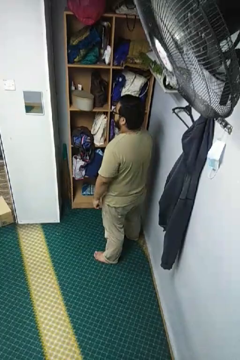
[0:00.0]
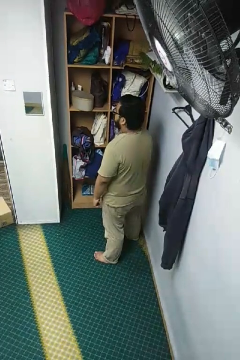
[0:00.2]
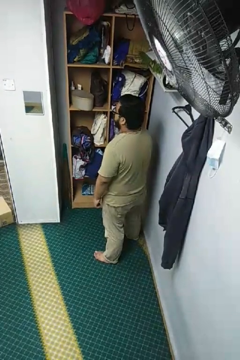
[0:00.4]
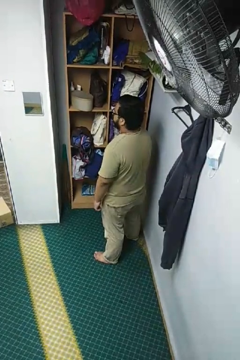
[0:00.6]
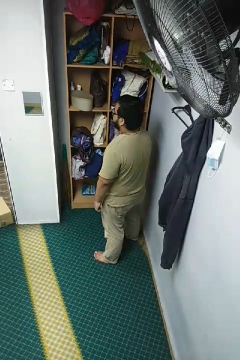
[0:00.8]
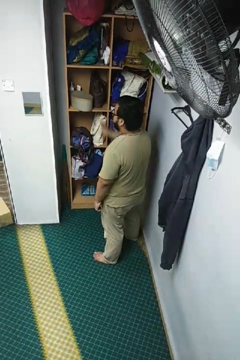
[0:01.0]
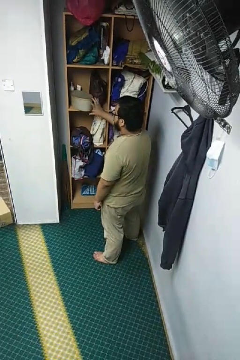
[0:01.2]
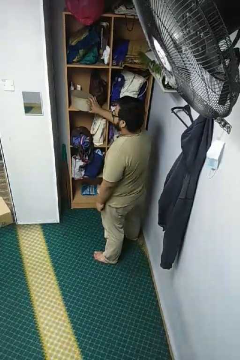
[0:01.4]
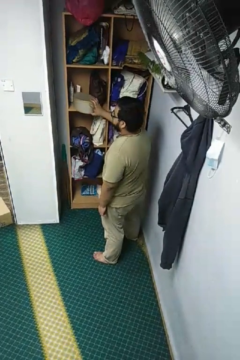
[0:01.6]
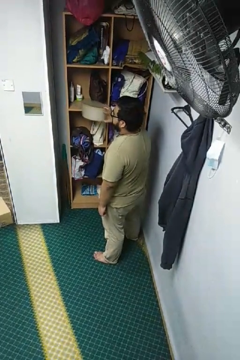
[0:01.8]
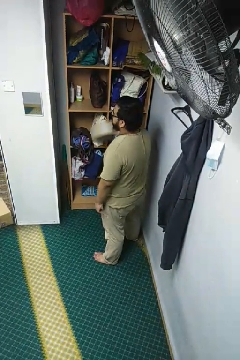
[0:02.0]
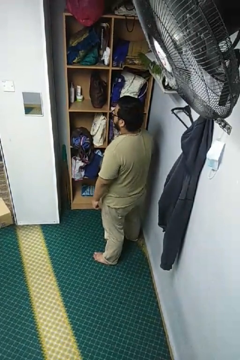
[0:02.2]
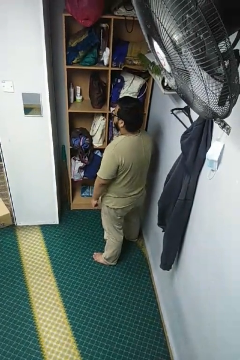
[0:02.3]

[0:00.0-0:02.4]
person picks up object from cabinet

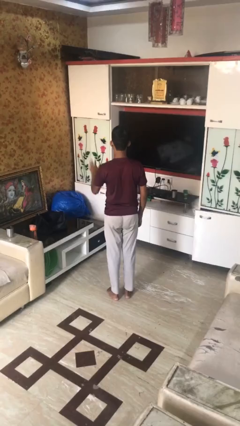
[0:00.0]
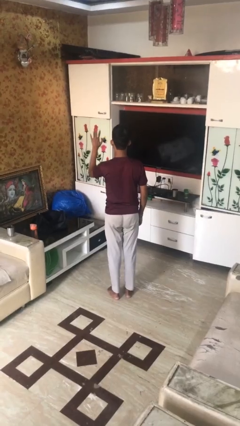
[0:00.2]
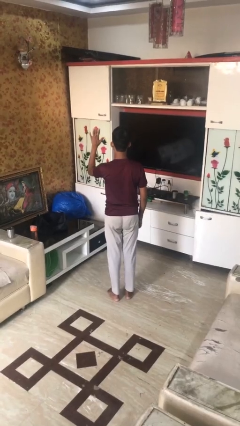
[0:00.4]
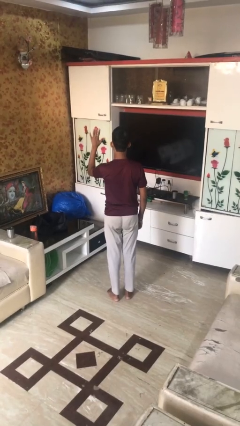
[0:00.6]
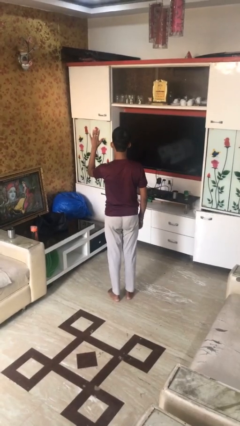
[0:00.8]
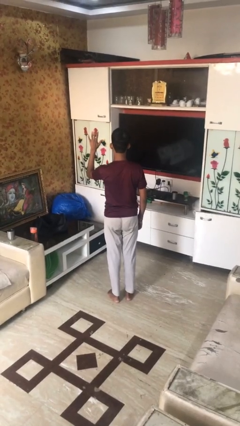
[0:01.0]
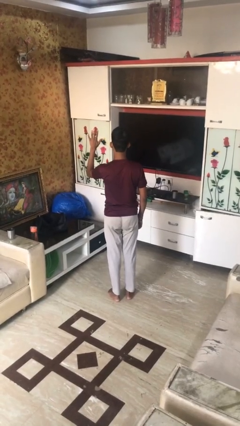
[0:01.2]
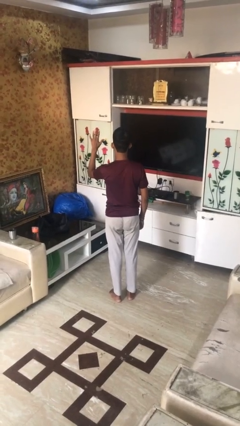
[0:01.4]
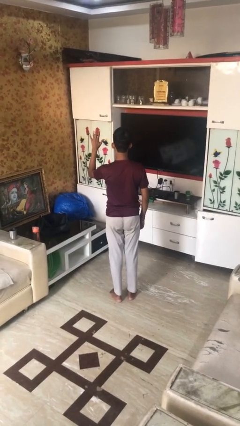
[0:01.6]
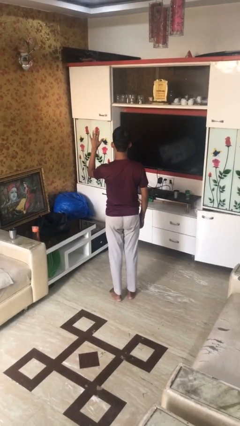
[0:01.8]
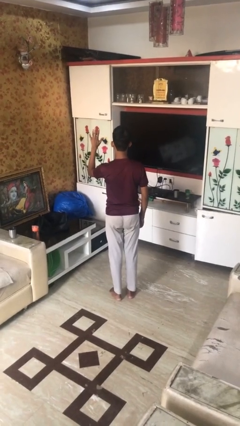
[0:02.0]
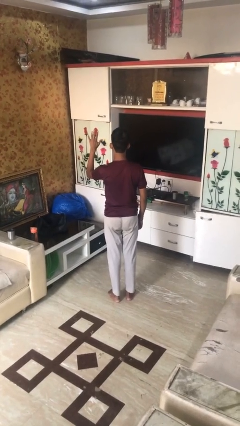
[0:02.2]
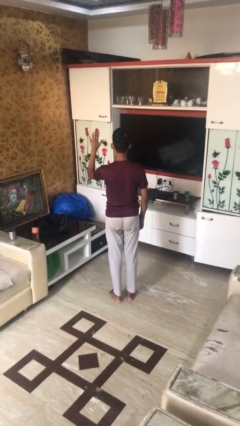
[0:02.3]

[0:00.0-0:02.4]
person gestures number five

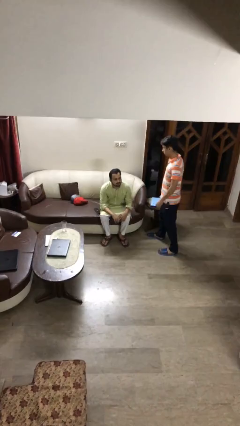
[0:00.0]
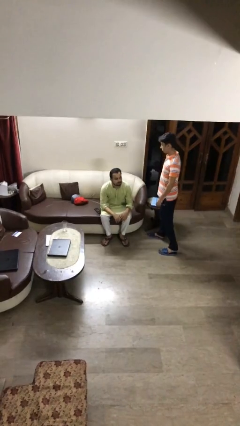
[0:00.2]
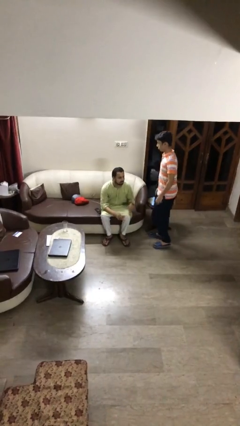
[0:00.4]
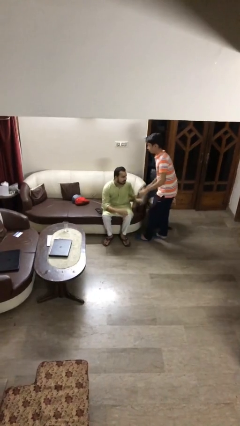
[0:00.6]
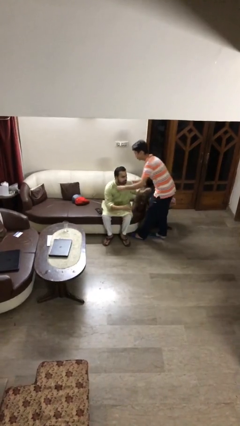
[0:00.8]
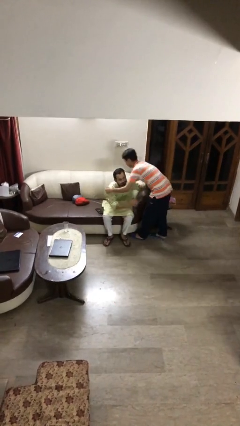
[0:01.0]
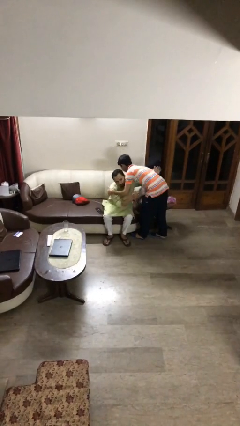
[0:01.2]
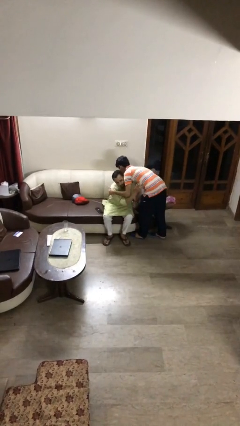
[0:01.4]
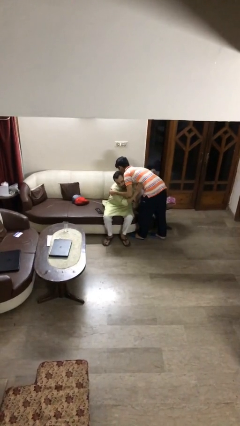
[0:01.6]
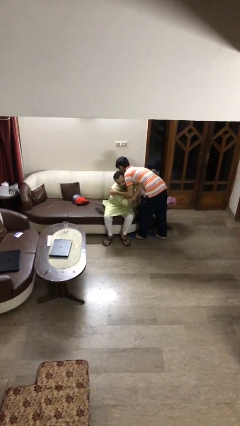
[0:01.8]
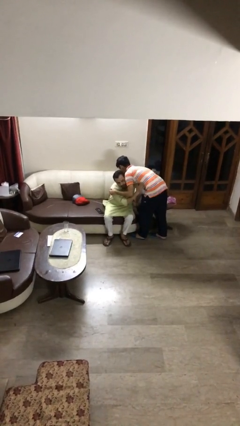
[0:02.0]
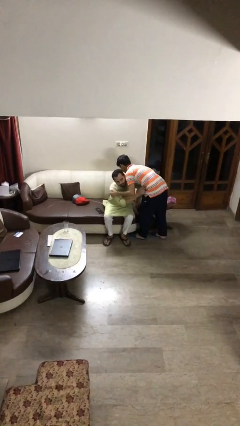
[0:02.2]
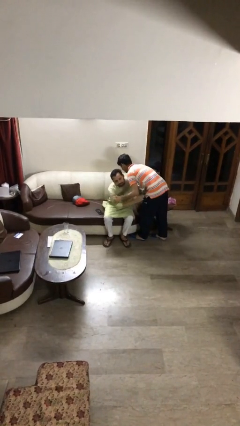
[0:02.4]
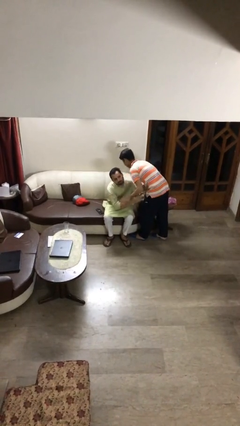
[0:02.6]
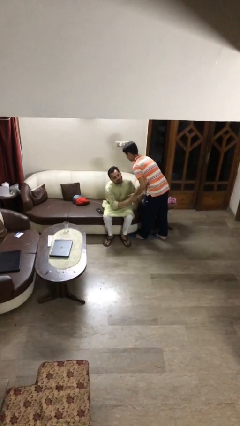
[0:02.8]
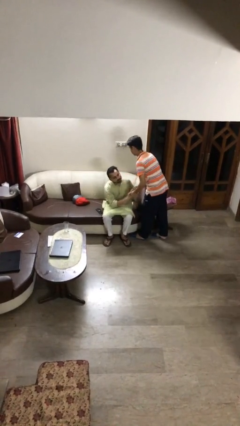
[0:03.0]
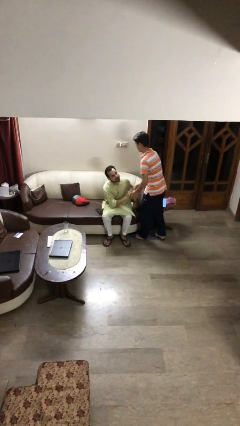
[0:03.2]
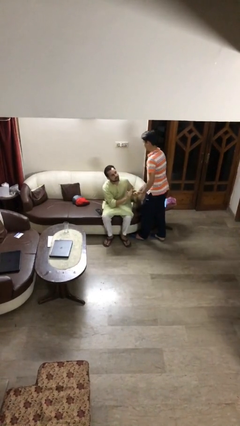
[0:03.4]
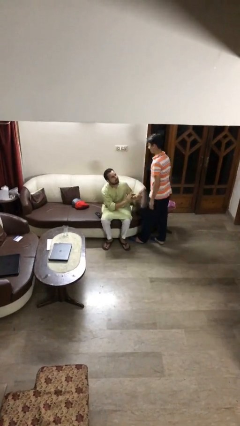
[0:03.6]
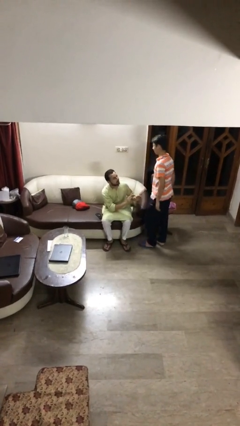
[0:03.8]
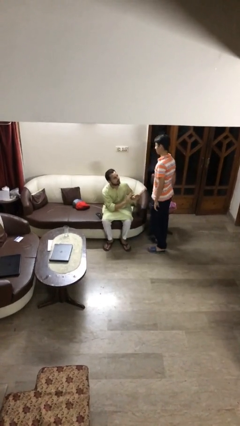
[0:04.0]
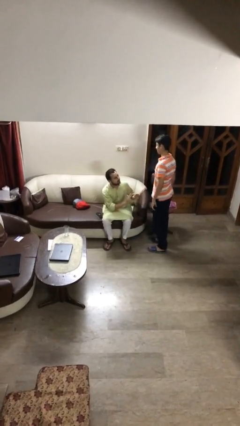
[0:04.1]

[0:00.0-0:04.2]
person embraces person

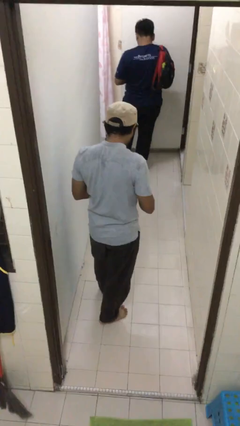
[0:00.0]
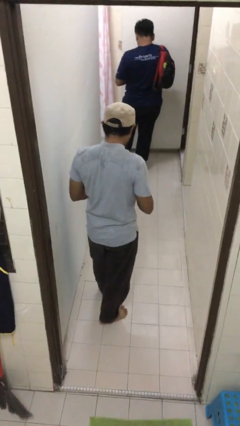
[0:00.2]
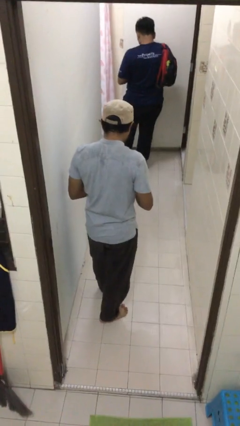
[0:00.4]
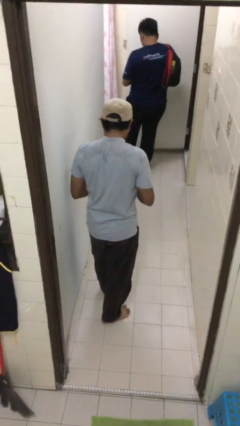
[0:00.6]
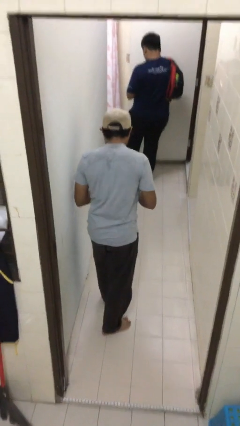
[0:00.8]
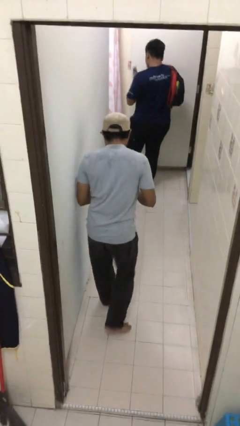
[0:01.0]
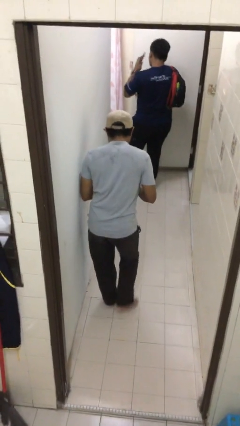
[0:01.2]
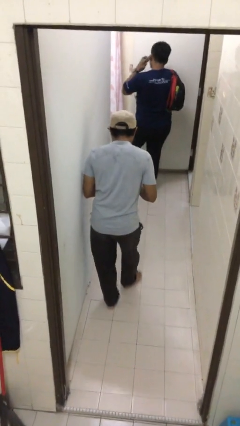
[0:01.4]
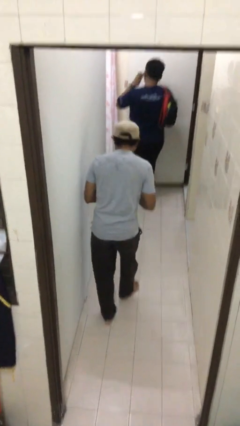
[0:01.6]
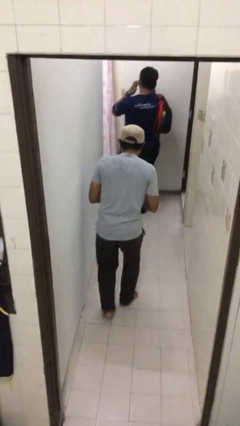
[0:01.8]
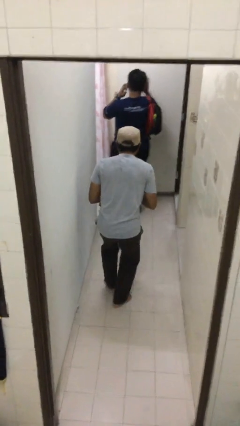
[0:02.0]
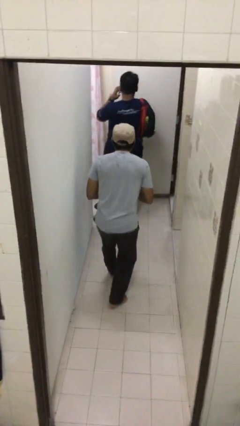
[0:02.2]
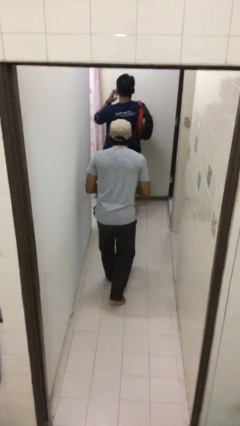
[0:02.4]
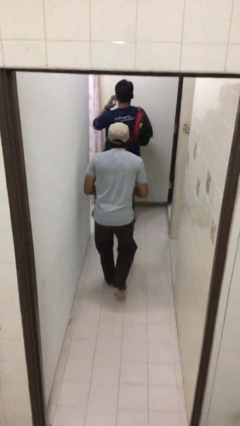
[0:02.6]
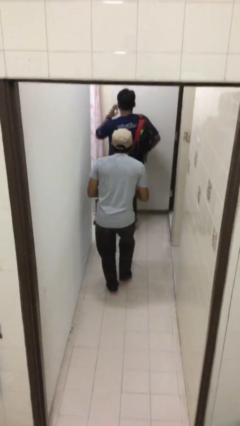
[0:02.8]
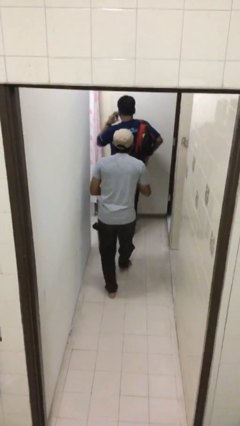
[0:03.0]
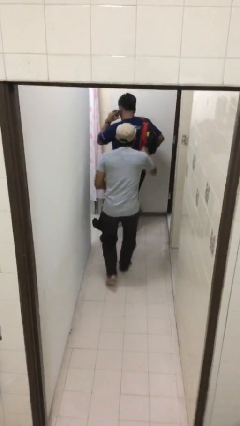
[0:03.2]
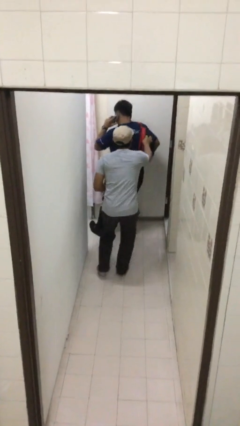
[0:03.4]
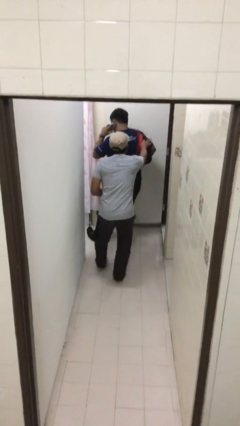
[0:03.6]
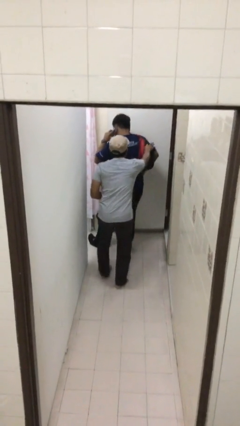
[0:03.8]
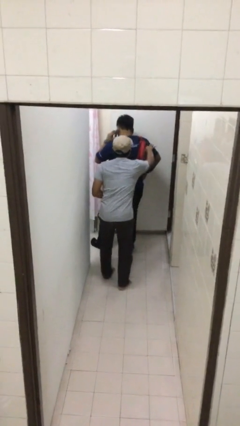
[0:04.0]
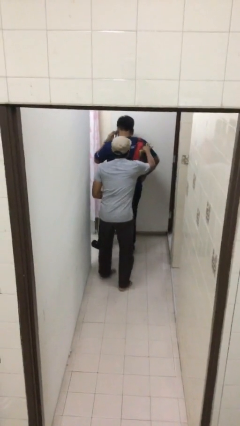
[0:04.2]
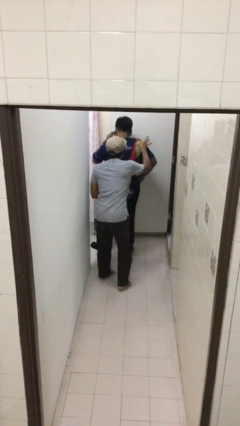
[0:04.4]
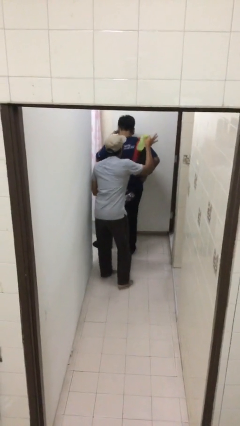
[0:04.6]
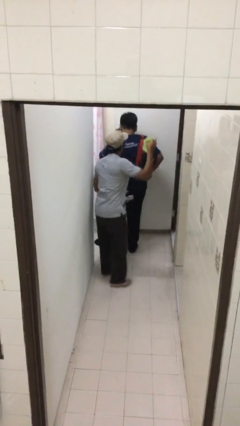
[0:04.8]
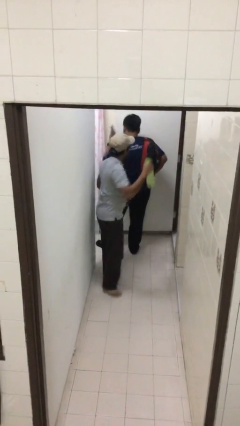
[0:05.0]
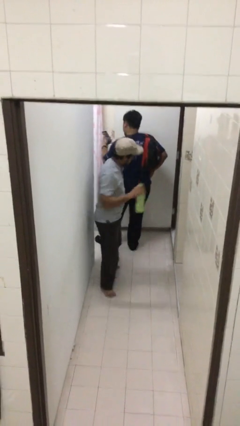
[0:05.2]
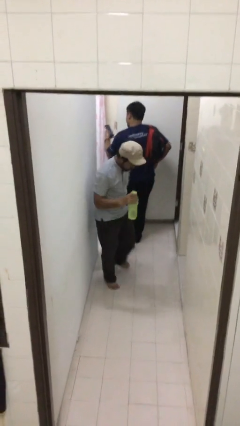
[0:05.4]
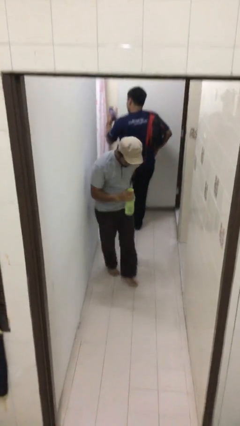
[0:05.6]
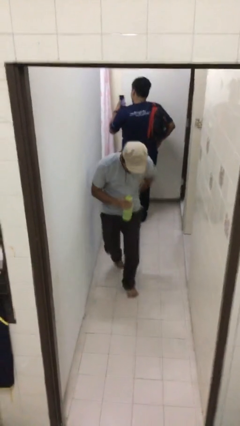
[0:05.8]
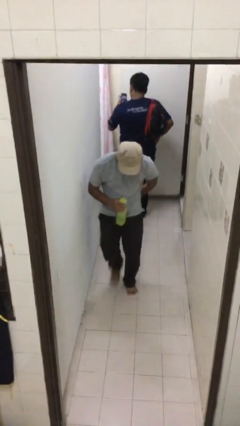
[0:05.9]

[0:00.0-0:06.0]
person steals object from person

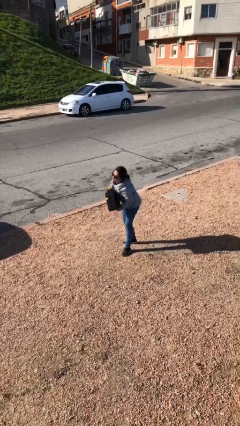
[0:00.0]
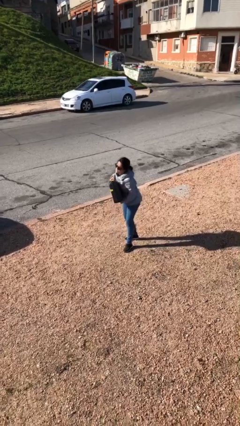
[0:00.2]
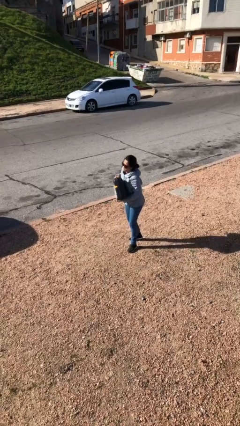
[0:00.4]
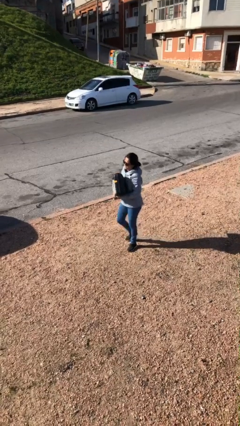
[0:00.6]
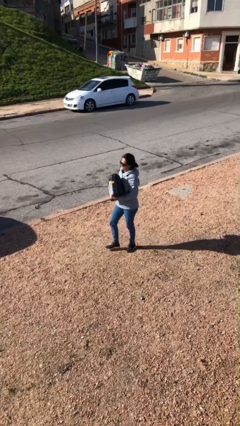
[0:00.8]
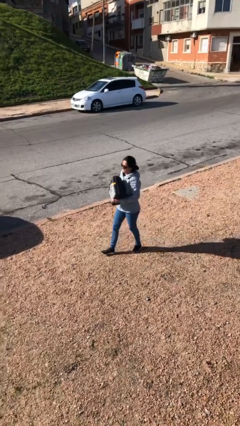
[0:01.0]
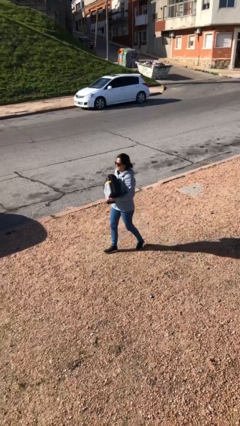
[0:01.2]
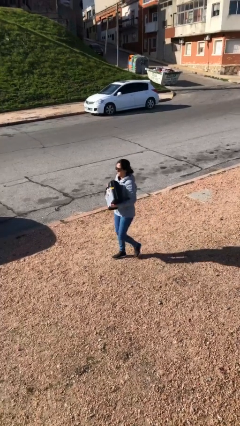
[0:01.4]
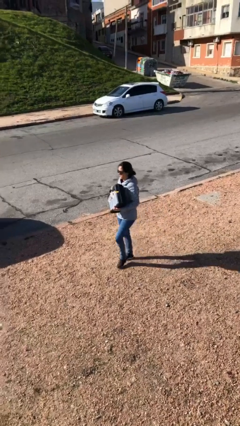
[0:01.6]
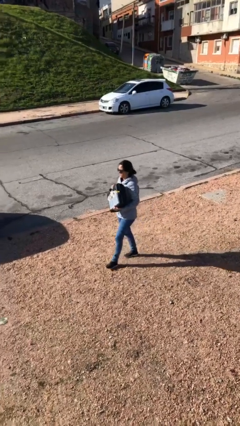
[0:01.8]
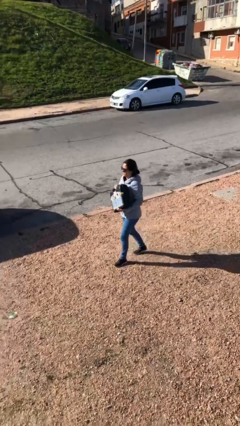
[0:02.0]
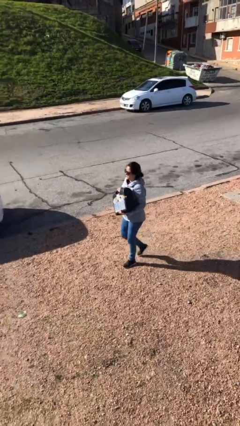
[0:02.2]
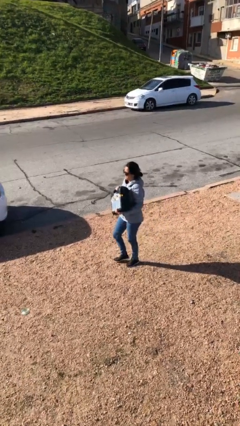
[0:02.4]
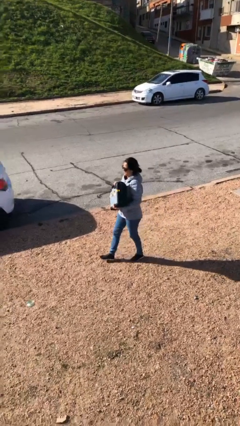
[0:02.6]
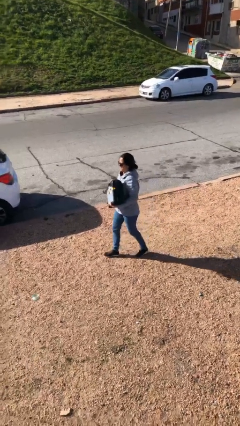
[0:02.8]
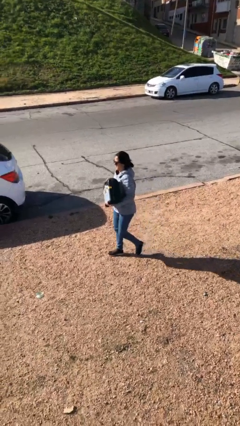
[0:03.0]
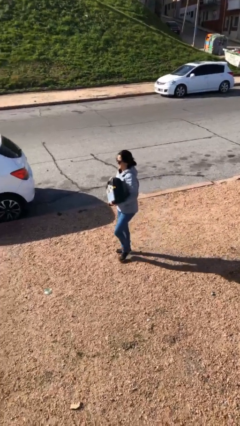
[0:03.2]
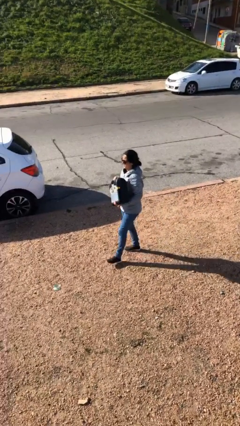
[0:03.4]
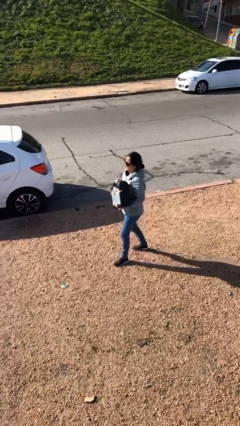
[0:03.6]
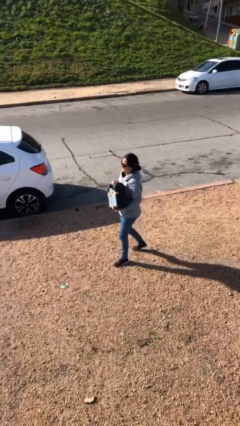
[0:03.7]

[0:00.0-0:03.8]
person carries heavy object
